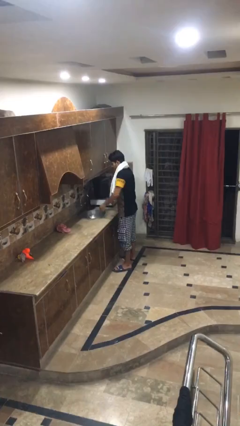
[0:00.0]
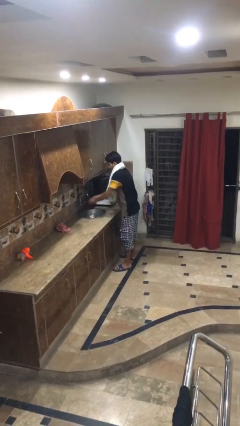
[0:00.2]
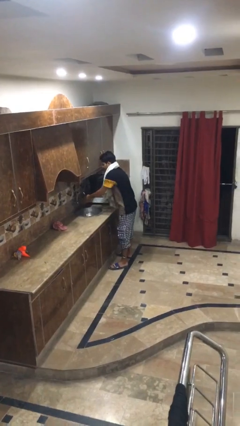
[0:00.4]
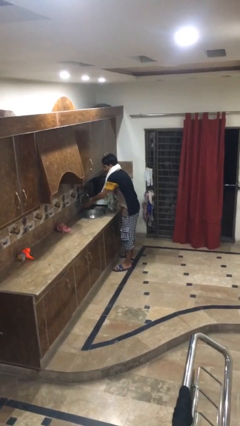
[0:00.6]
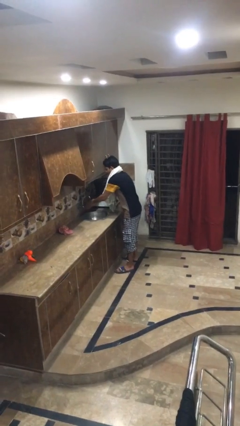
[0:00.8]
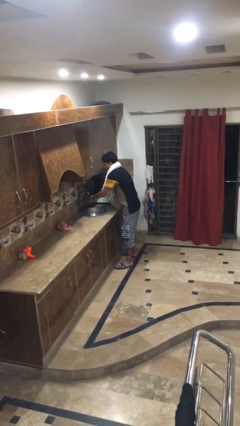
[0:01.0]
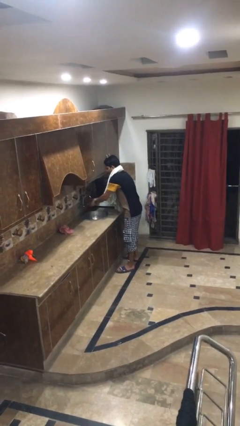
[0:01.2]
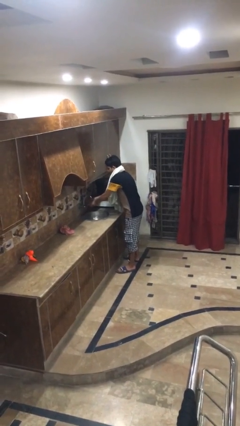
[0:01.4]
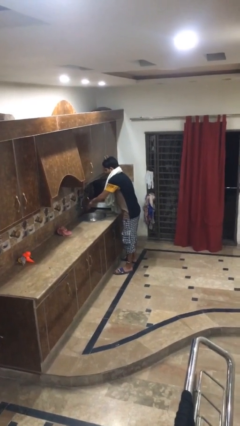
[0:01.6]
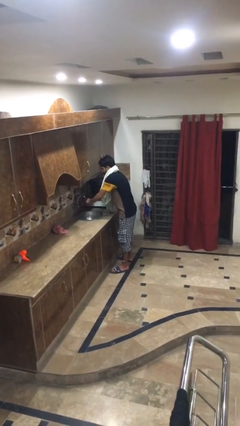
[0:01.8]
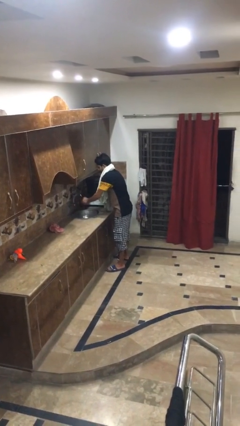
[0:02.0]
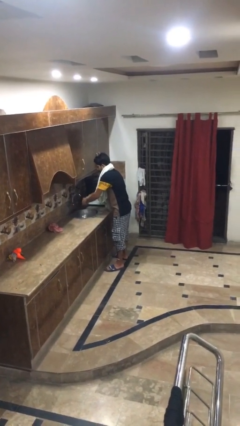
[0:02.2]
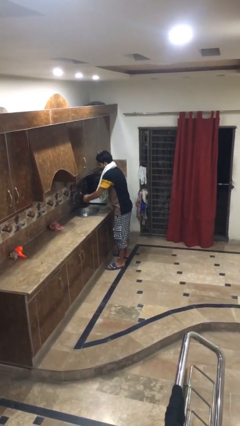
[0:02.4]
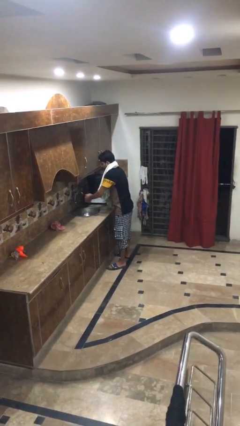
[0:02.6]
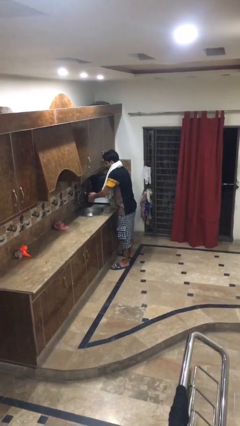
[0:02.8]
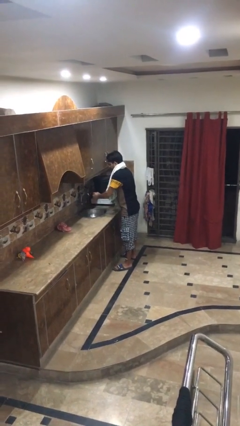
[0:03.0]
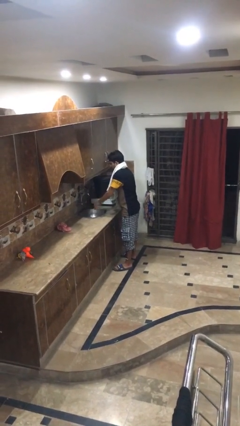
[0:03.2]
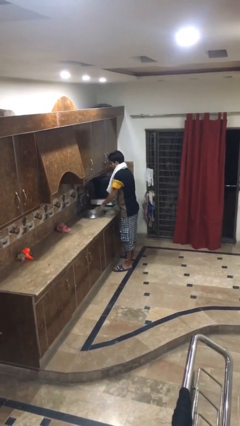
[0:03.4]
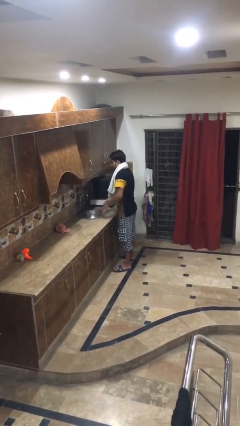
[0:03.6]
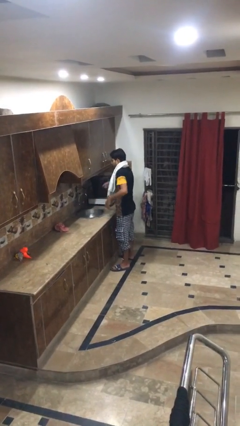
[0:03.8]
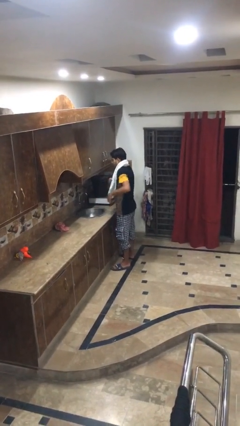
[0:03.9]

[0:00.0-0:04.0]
person washes hands

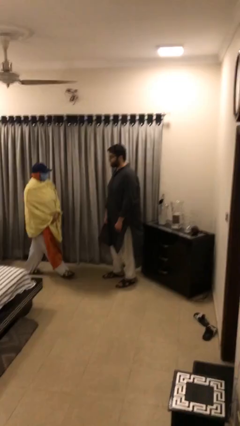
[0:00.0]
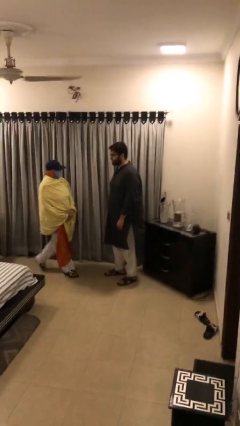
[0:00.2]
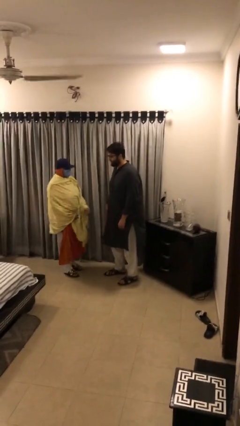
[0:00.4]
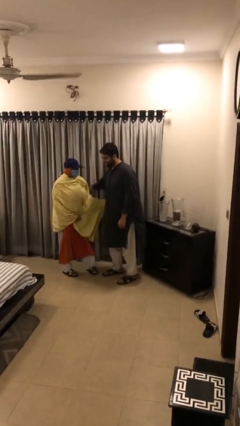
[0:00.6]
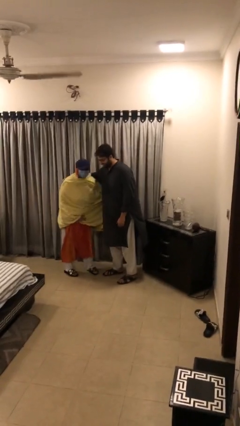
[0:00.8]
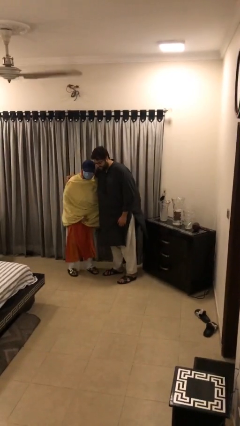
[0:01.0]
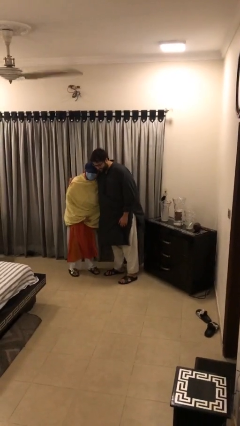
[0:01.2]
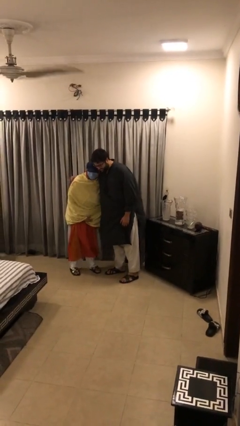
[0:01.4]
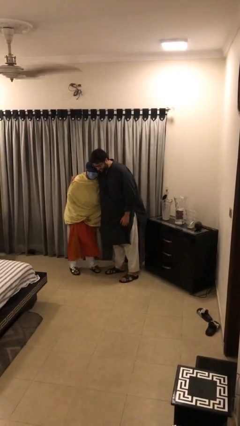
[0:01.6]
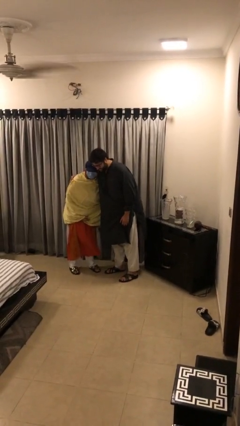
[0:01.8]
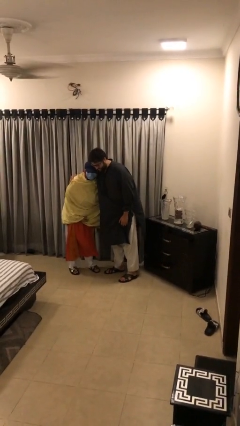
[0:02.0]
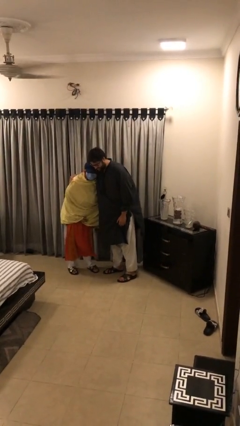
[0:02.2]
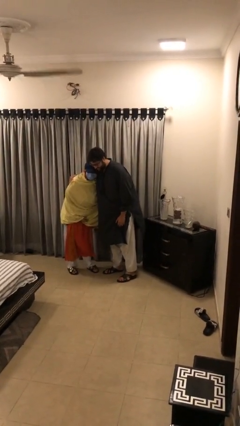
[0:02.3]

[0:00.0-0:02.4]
person embraces person

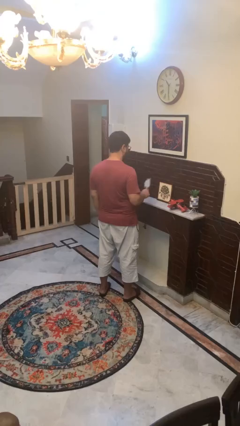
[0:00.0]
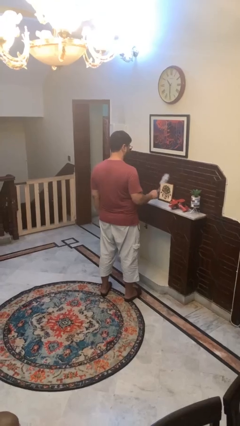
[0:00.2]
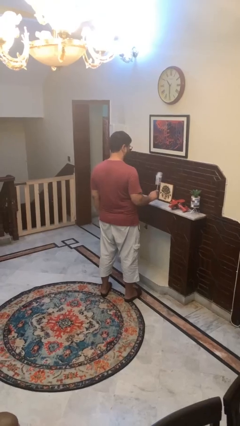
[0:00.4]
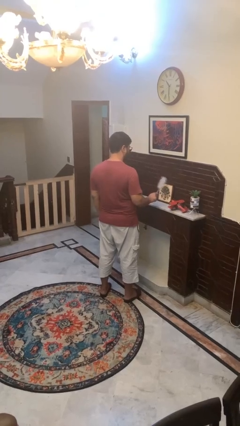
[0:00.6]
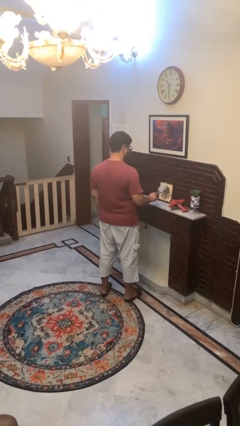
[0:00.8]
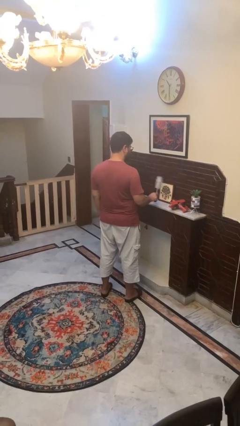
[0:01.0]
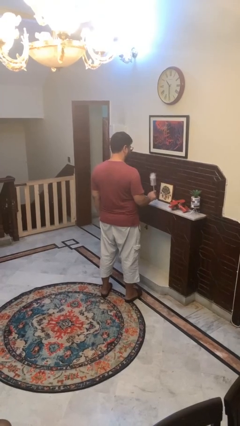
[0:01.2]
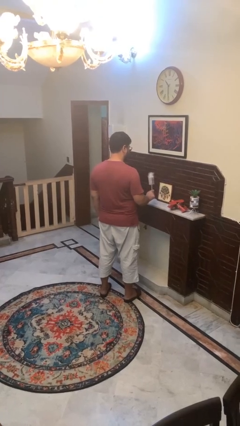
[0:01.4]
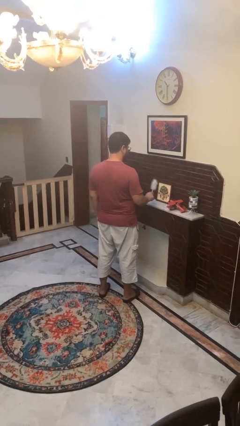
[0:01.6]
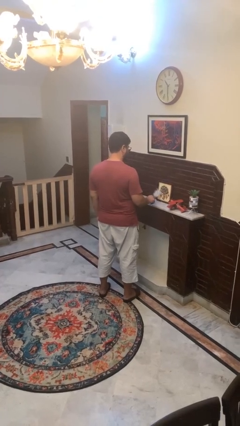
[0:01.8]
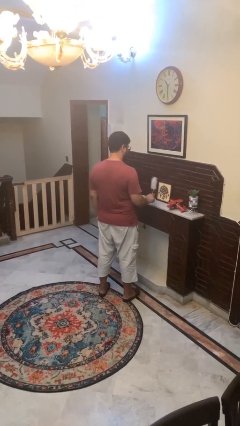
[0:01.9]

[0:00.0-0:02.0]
person dusts furniture

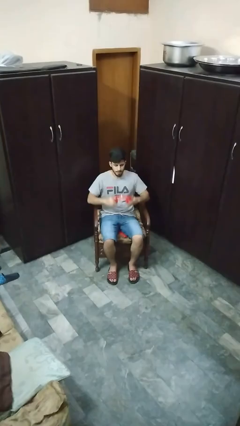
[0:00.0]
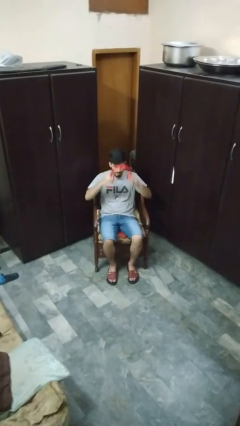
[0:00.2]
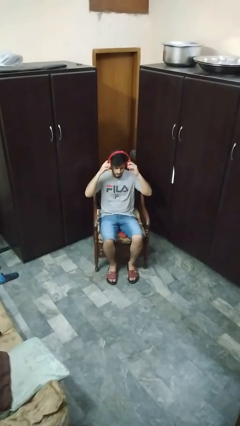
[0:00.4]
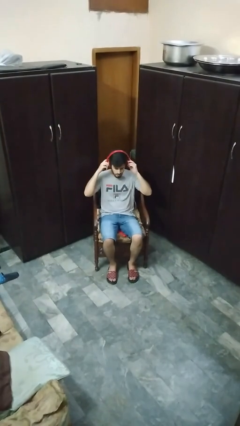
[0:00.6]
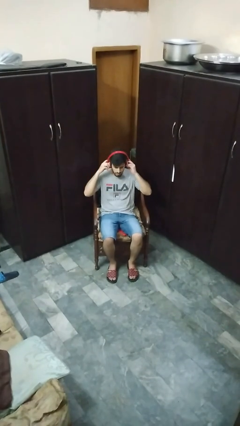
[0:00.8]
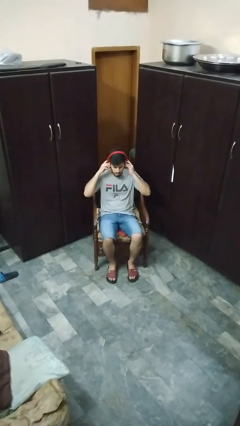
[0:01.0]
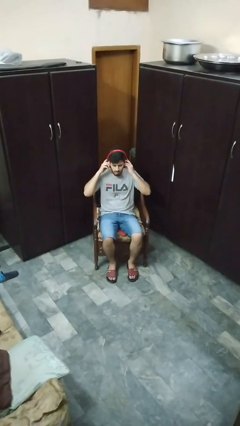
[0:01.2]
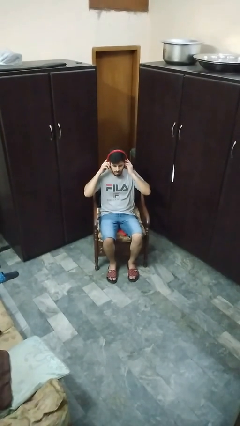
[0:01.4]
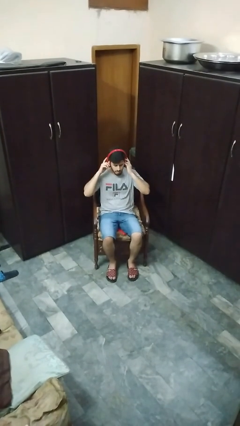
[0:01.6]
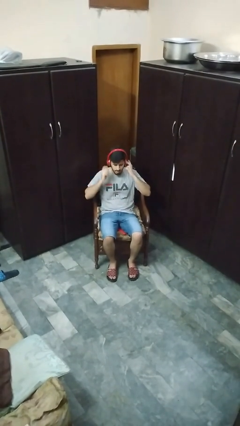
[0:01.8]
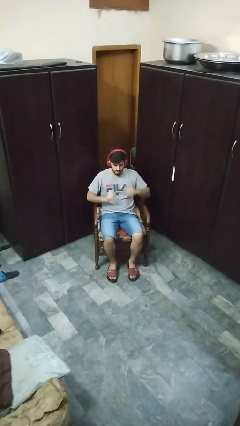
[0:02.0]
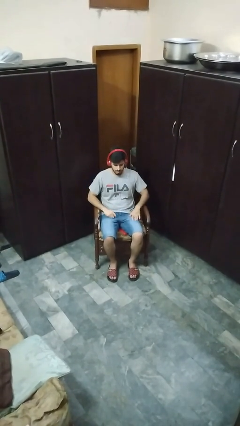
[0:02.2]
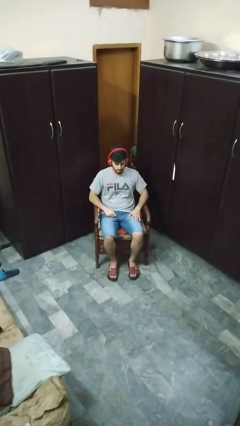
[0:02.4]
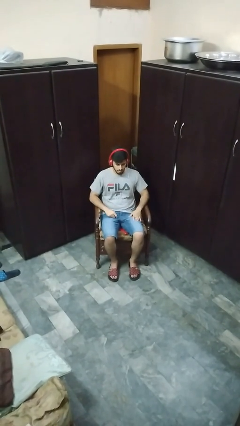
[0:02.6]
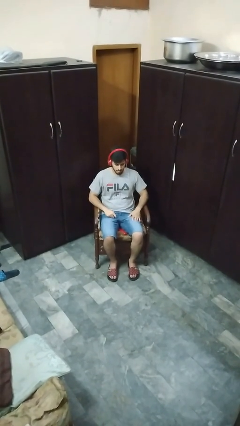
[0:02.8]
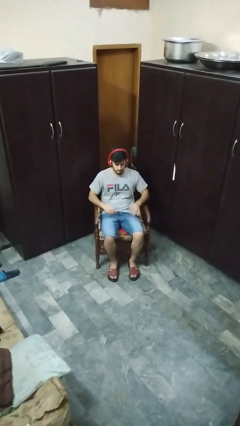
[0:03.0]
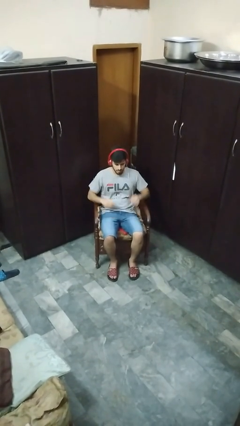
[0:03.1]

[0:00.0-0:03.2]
person puts on headphones

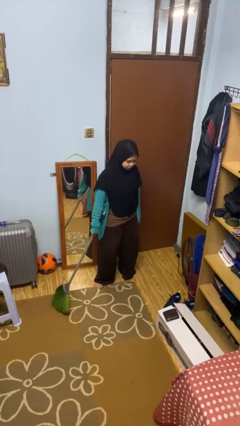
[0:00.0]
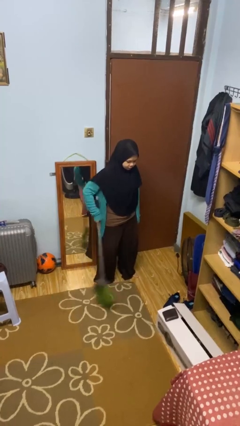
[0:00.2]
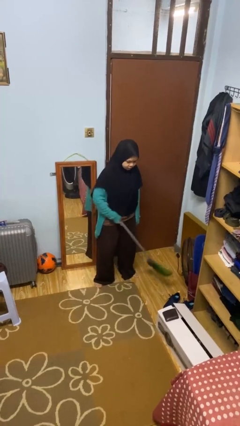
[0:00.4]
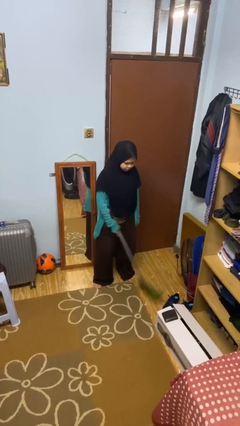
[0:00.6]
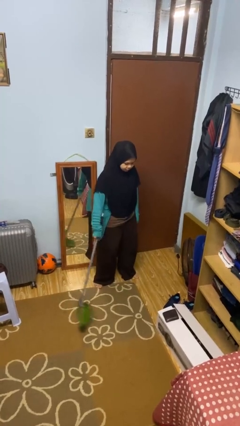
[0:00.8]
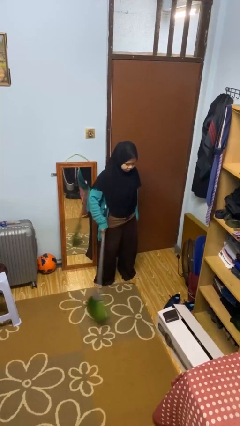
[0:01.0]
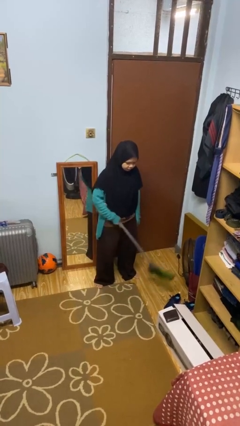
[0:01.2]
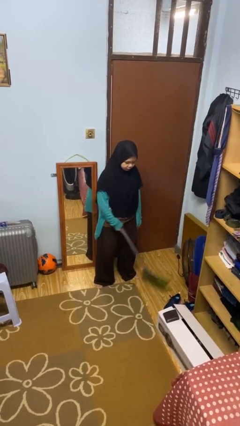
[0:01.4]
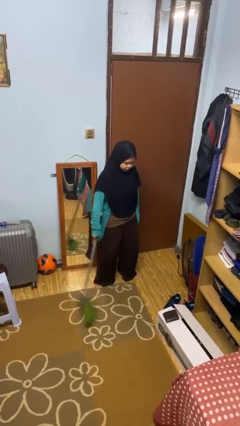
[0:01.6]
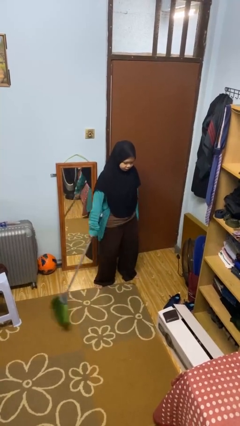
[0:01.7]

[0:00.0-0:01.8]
person sweeps floor

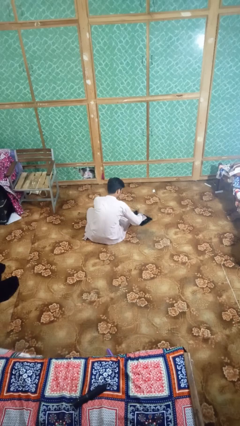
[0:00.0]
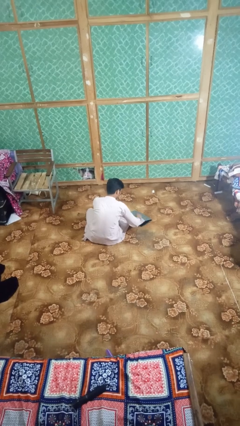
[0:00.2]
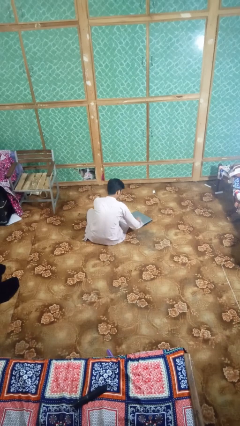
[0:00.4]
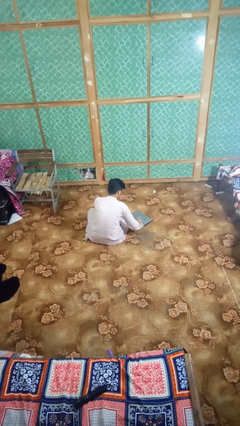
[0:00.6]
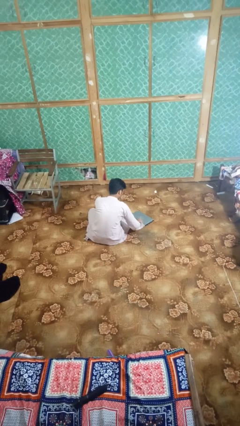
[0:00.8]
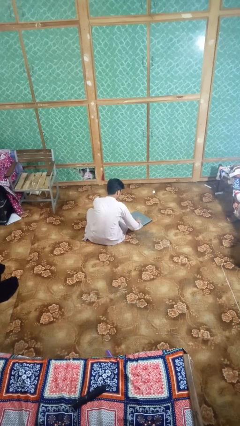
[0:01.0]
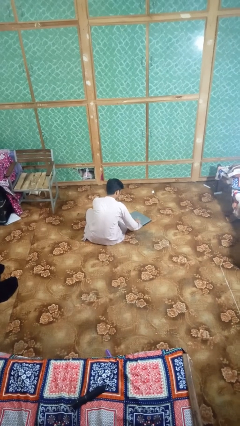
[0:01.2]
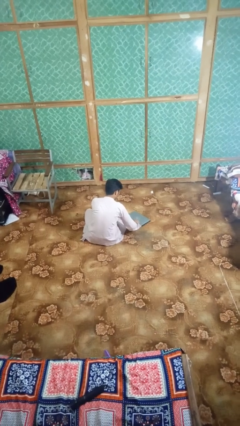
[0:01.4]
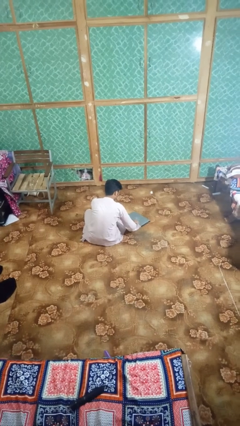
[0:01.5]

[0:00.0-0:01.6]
person closes laptop

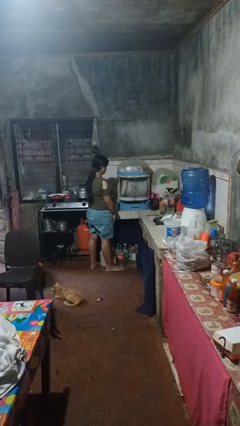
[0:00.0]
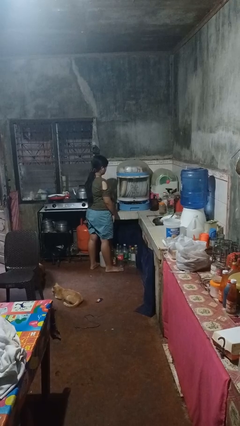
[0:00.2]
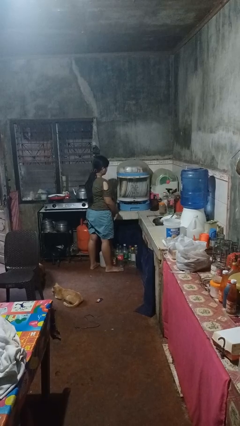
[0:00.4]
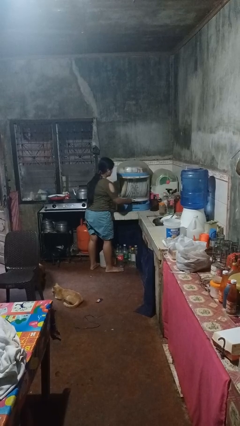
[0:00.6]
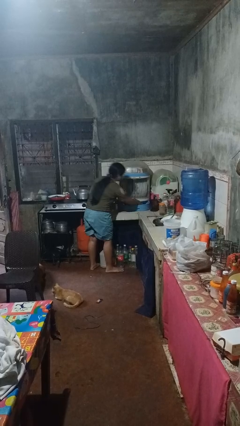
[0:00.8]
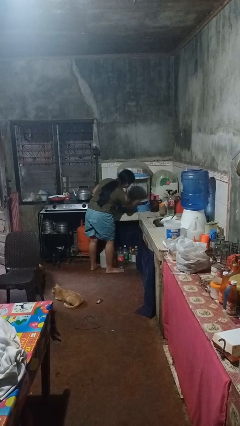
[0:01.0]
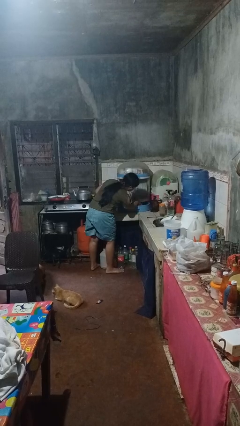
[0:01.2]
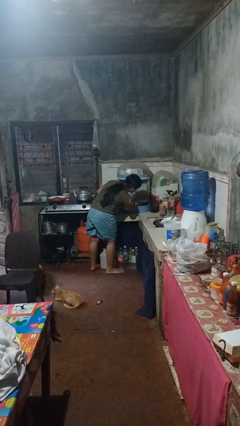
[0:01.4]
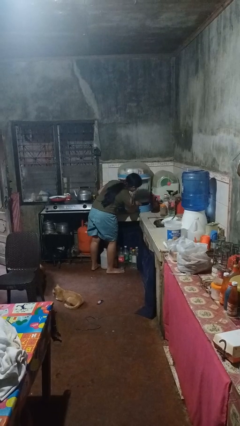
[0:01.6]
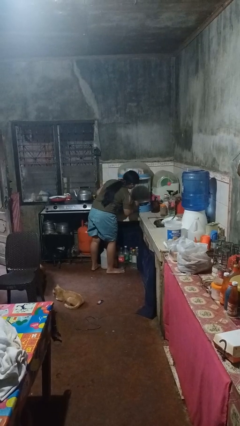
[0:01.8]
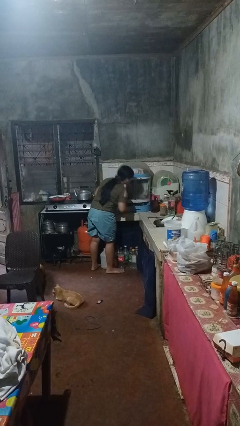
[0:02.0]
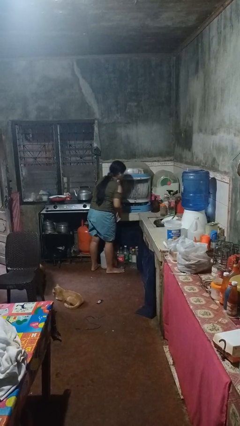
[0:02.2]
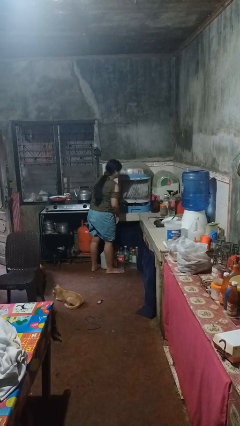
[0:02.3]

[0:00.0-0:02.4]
person searches in kitchen drawer
